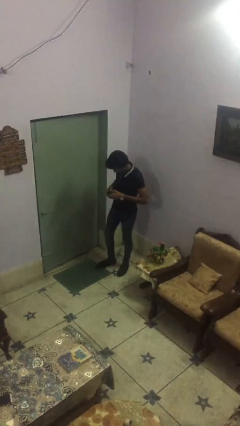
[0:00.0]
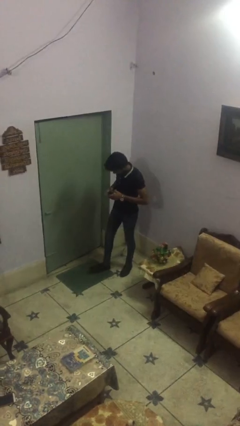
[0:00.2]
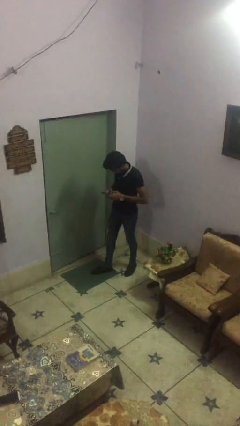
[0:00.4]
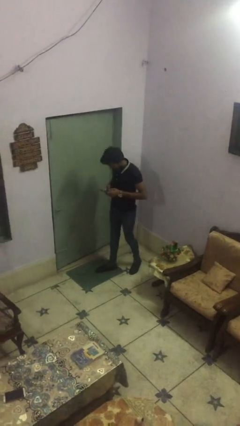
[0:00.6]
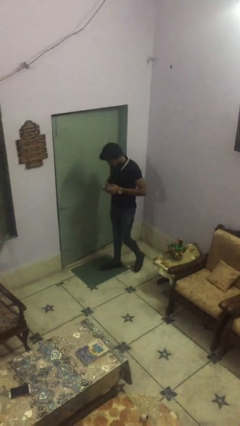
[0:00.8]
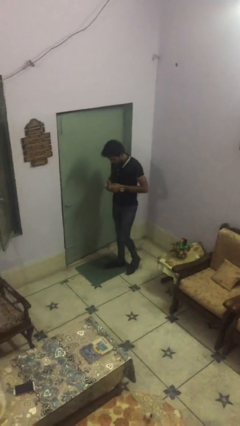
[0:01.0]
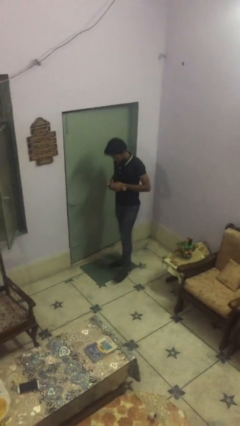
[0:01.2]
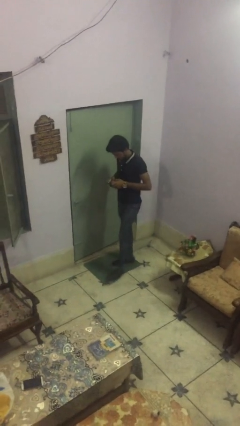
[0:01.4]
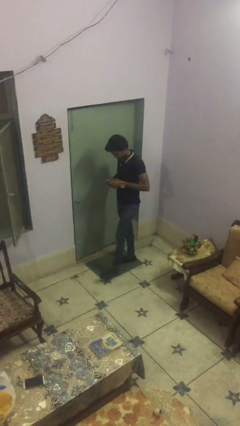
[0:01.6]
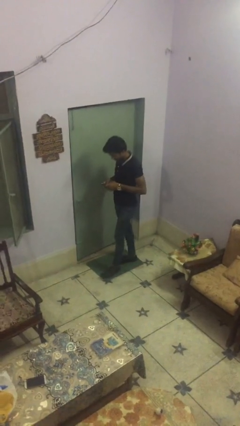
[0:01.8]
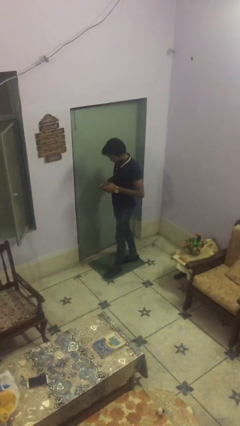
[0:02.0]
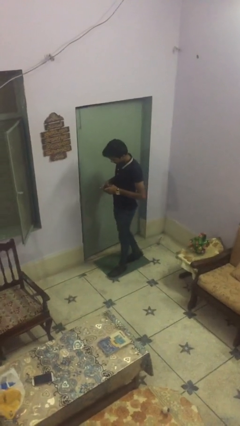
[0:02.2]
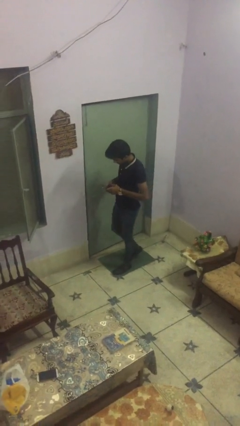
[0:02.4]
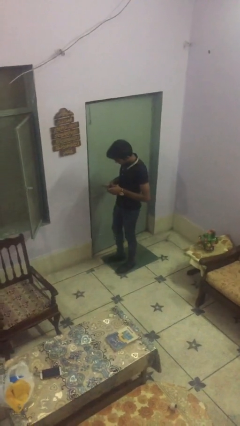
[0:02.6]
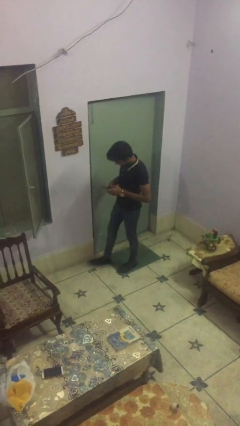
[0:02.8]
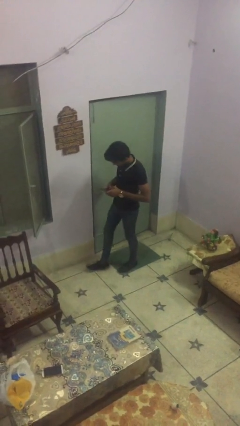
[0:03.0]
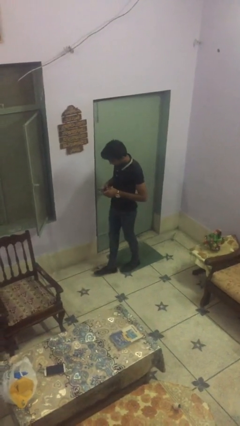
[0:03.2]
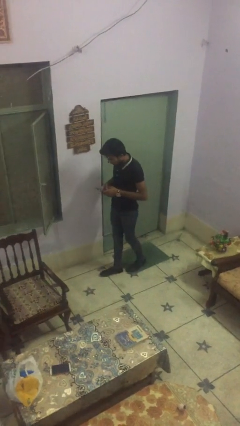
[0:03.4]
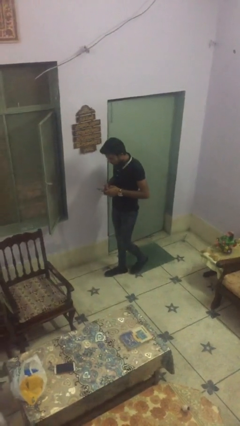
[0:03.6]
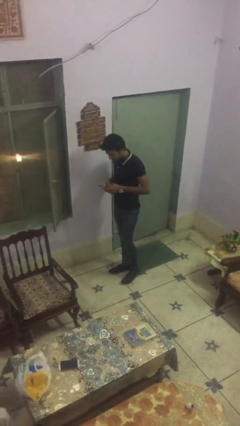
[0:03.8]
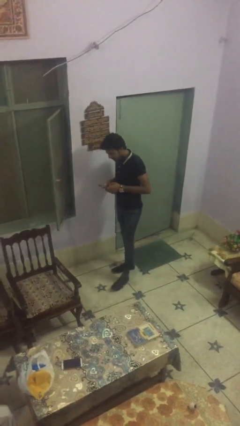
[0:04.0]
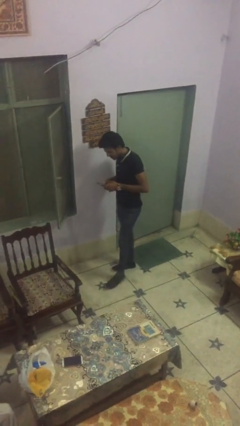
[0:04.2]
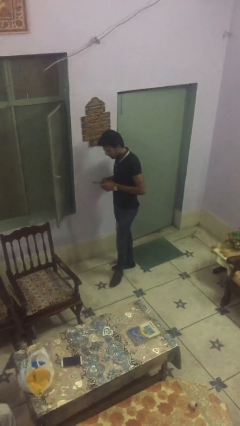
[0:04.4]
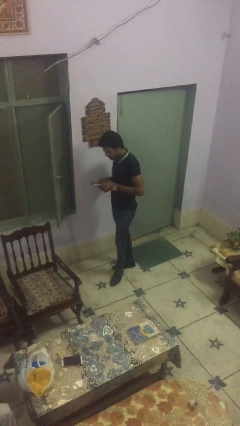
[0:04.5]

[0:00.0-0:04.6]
person texts on phone

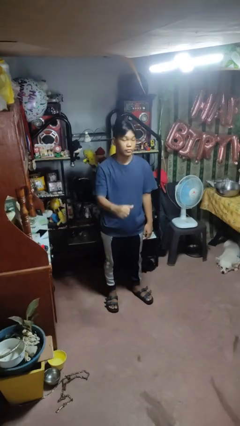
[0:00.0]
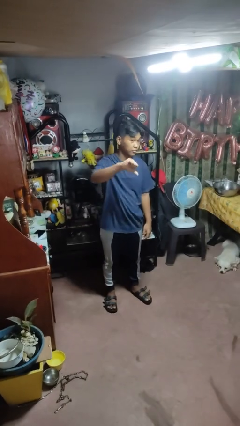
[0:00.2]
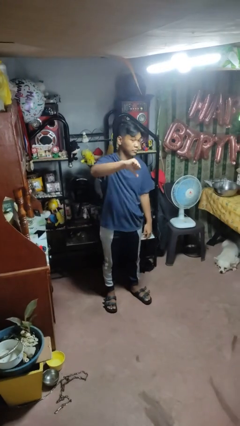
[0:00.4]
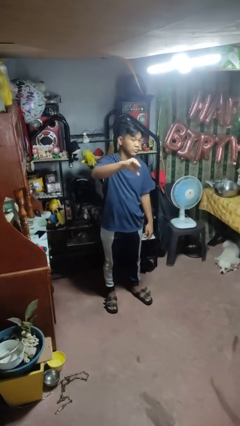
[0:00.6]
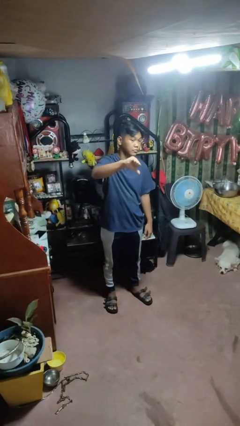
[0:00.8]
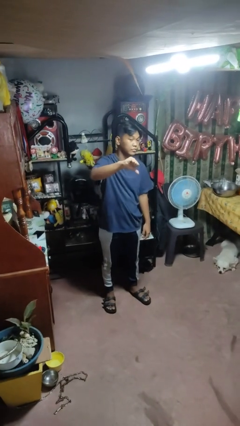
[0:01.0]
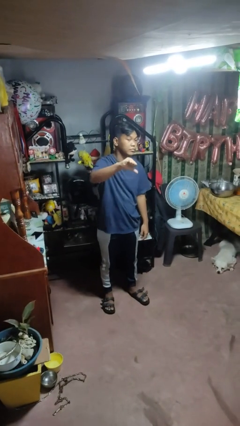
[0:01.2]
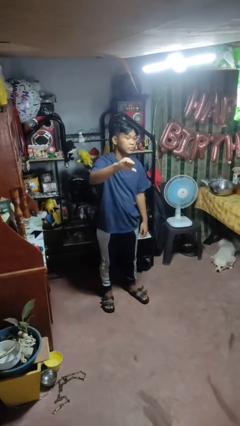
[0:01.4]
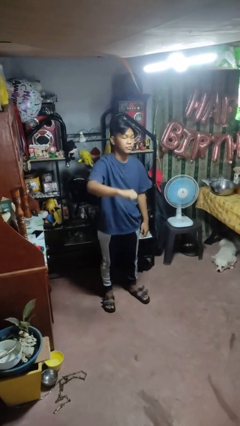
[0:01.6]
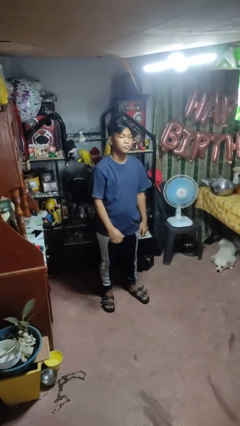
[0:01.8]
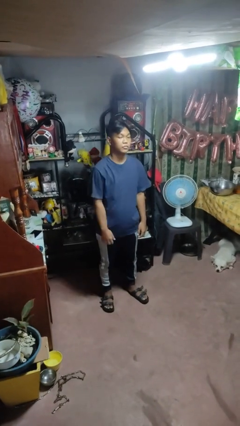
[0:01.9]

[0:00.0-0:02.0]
person gestures thumbs down

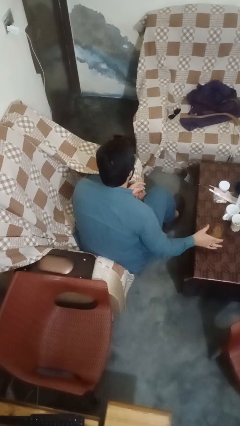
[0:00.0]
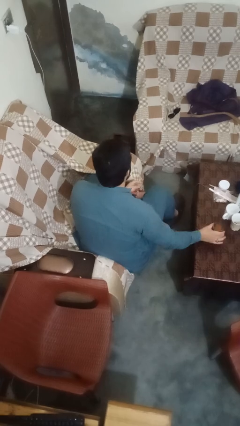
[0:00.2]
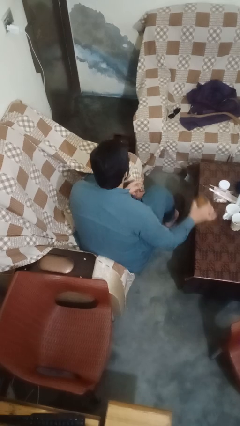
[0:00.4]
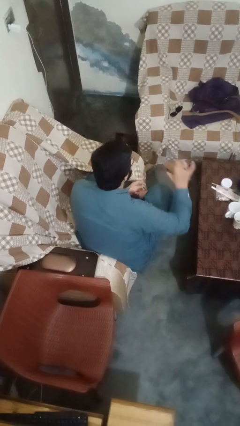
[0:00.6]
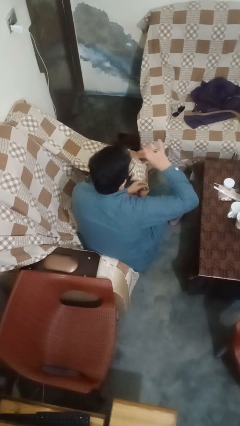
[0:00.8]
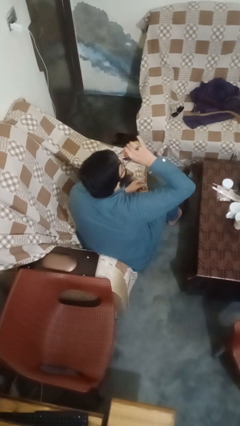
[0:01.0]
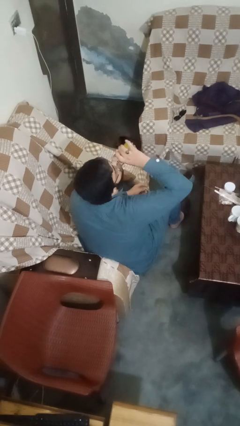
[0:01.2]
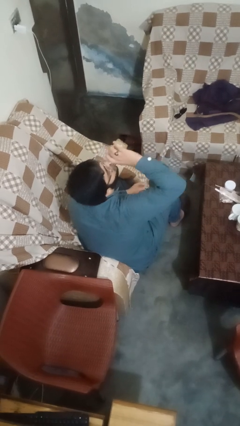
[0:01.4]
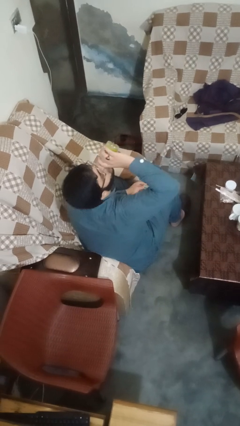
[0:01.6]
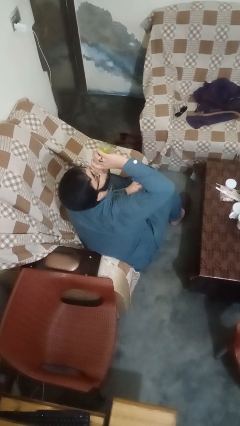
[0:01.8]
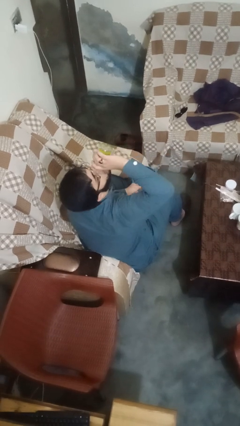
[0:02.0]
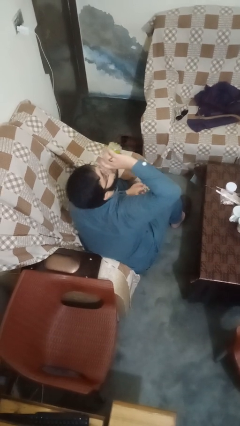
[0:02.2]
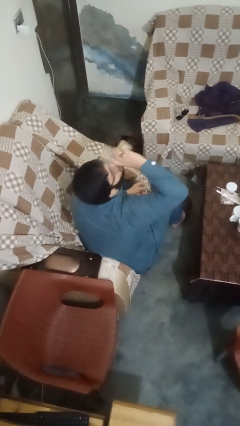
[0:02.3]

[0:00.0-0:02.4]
person drinks from cup

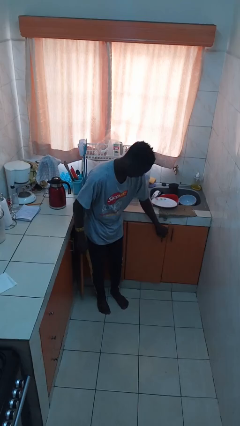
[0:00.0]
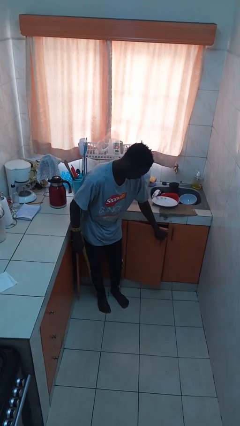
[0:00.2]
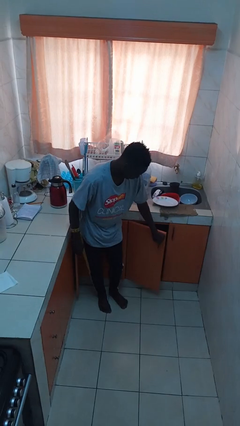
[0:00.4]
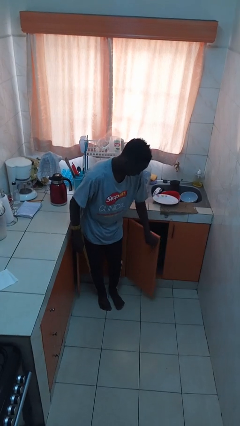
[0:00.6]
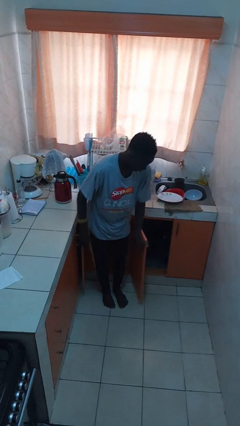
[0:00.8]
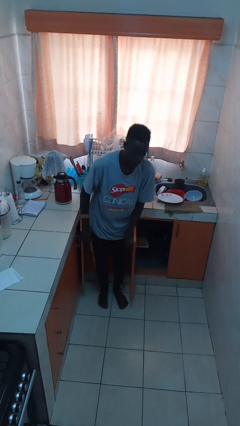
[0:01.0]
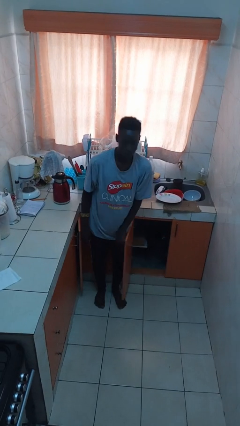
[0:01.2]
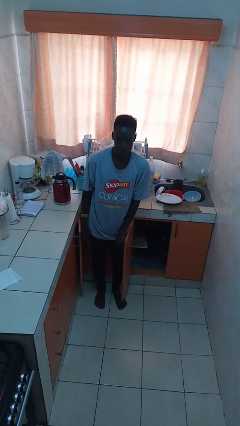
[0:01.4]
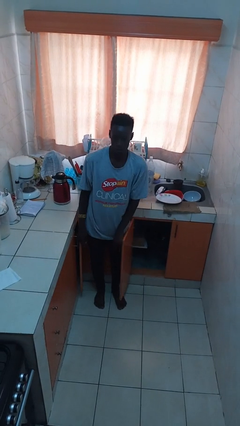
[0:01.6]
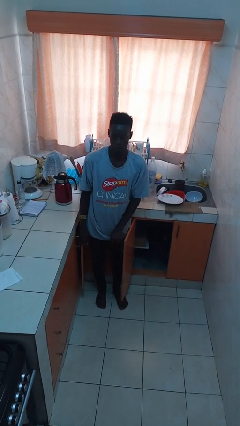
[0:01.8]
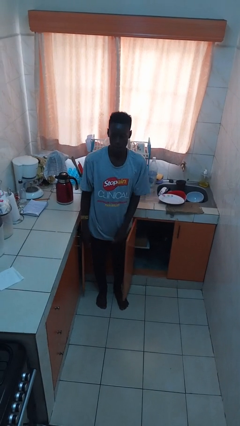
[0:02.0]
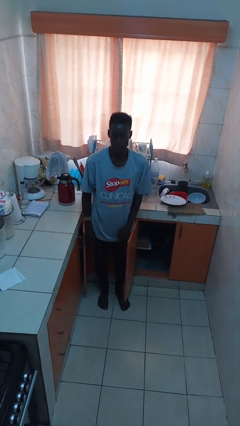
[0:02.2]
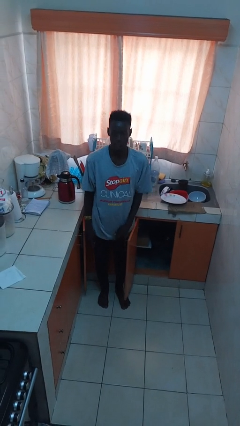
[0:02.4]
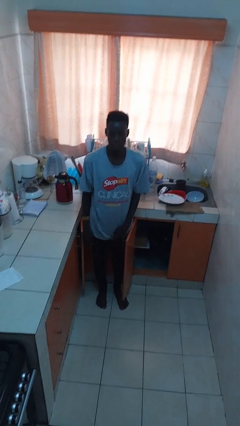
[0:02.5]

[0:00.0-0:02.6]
person opens cabinet

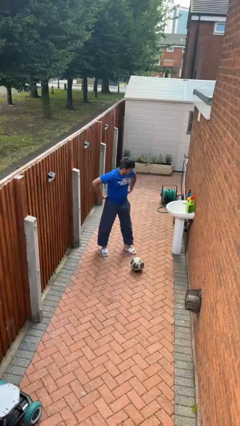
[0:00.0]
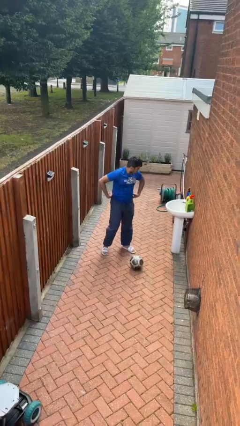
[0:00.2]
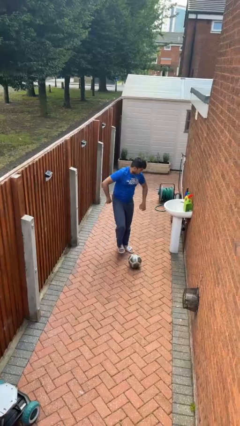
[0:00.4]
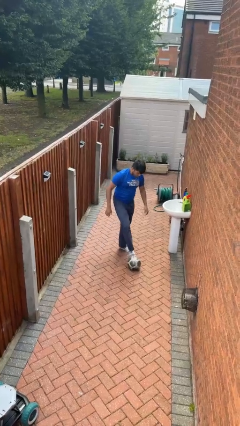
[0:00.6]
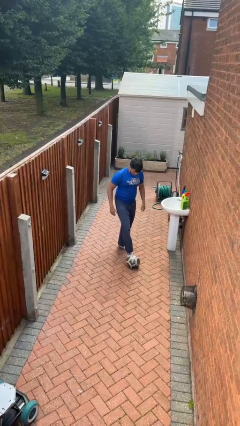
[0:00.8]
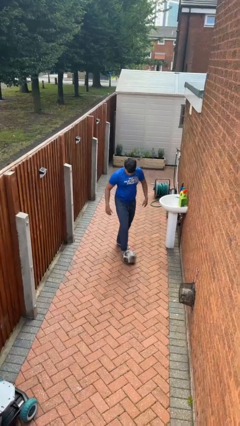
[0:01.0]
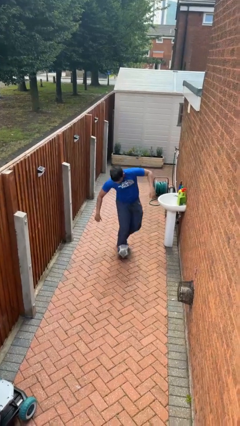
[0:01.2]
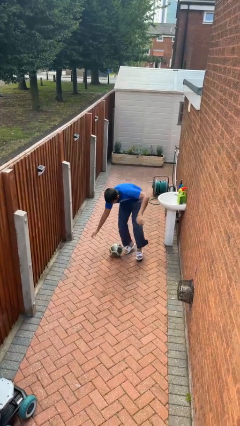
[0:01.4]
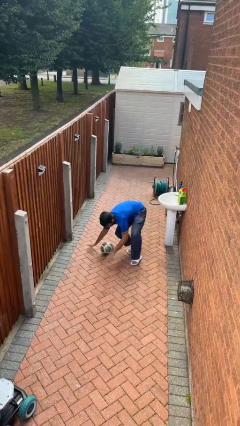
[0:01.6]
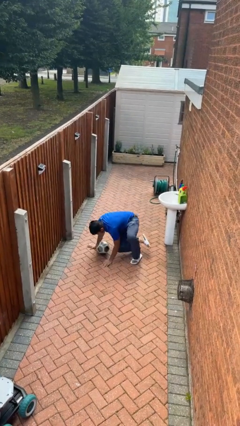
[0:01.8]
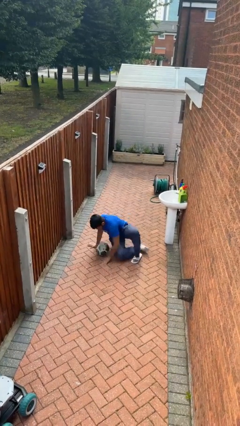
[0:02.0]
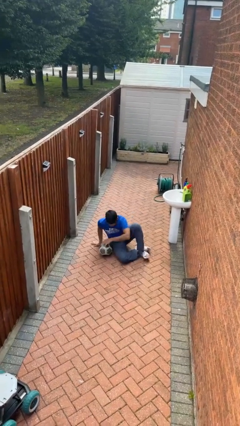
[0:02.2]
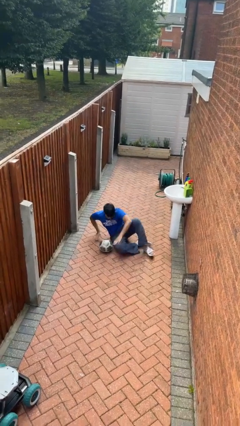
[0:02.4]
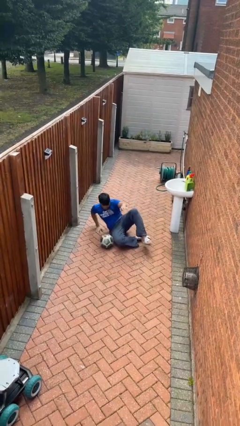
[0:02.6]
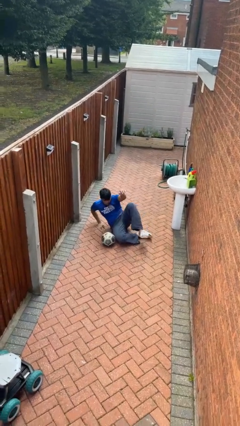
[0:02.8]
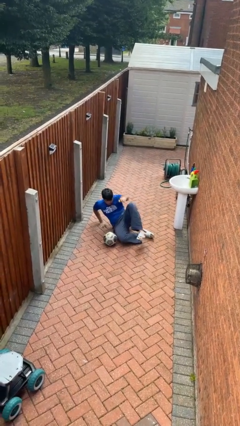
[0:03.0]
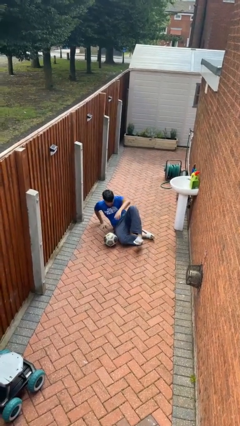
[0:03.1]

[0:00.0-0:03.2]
person trips on object on floor

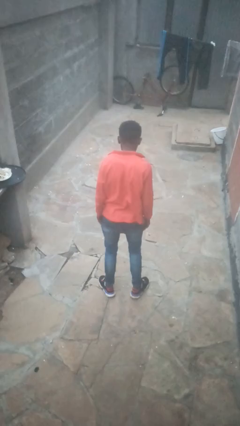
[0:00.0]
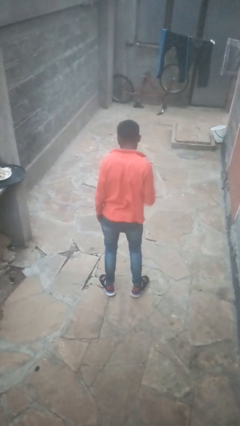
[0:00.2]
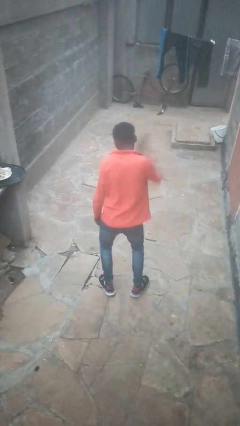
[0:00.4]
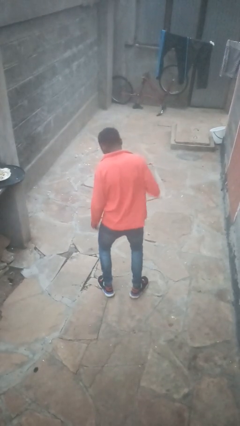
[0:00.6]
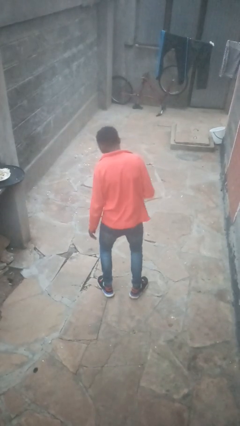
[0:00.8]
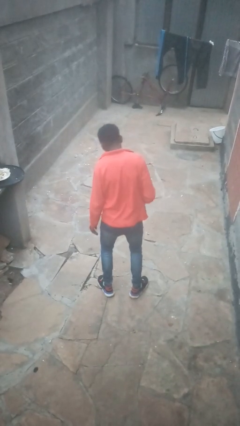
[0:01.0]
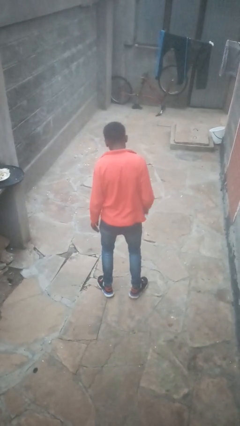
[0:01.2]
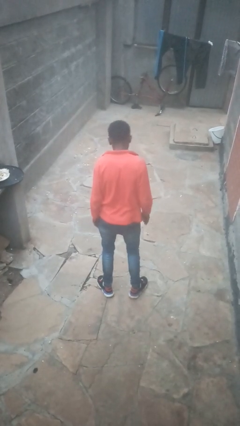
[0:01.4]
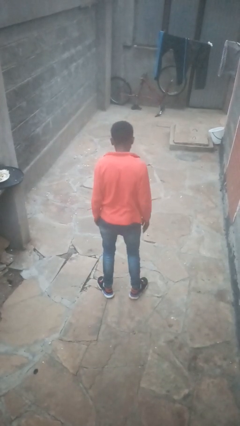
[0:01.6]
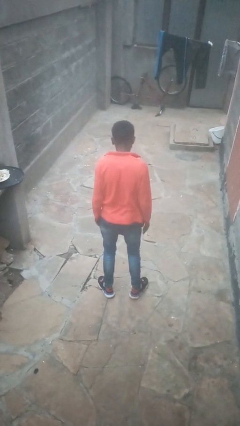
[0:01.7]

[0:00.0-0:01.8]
person swats bug

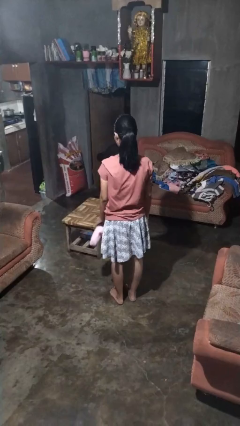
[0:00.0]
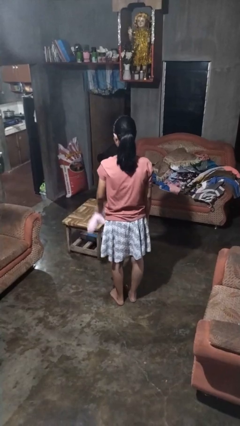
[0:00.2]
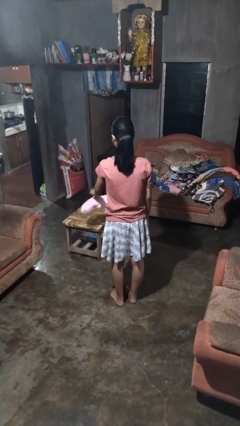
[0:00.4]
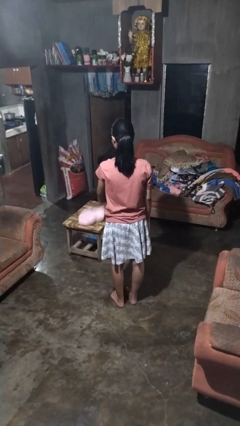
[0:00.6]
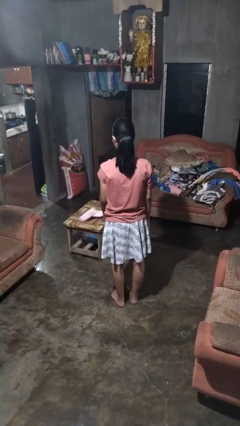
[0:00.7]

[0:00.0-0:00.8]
person throws object on table
